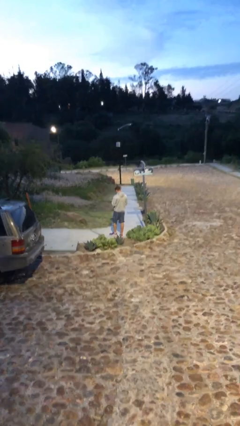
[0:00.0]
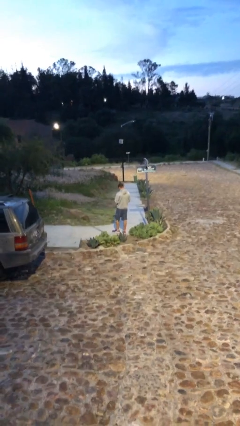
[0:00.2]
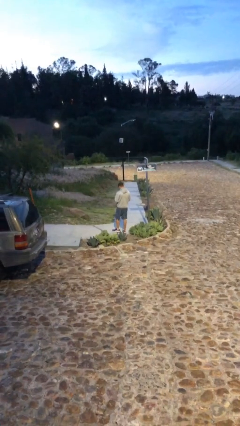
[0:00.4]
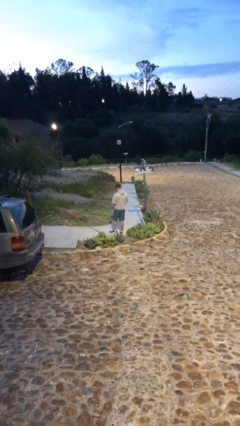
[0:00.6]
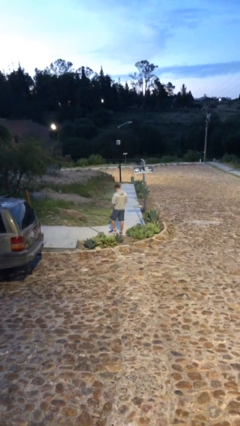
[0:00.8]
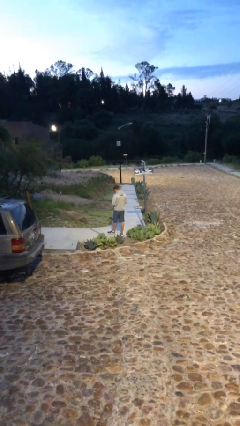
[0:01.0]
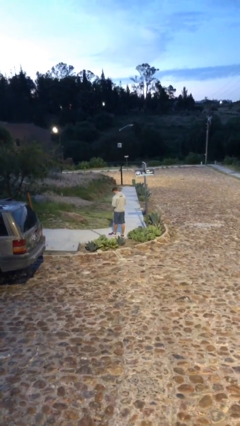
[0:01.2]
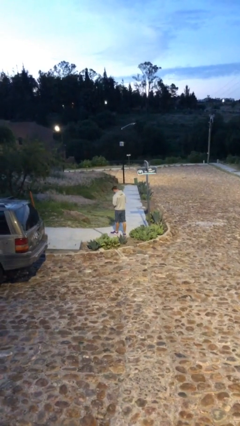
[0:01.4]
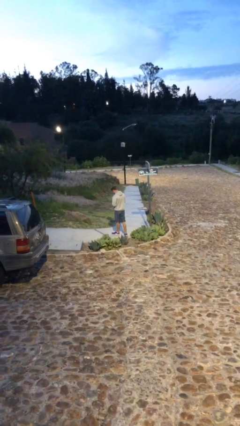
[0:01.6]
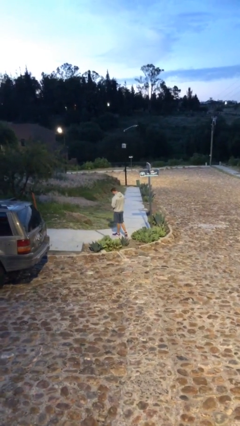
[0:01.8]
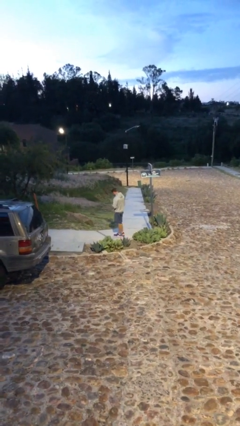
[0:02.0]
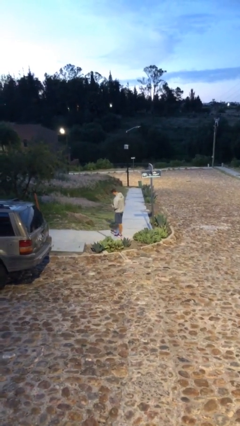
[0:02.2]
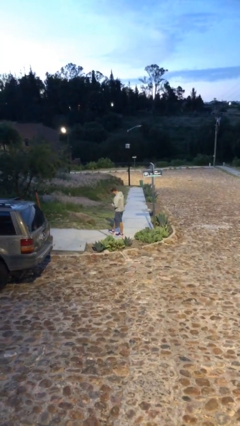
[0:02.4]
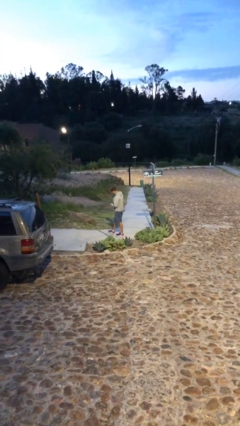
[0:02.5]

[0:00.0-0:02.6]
person texts on phone

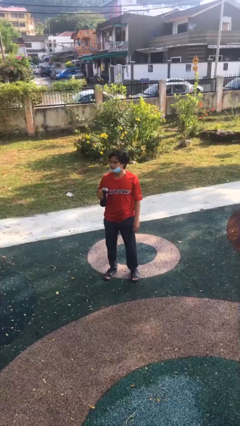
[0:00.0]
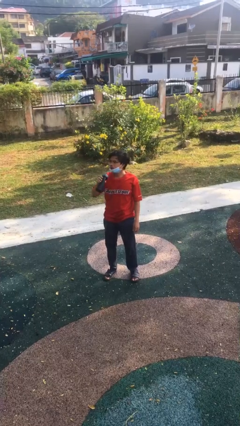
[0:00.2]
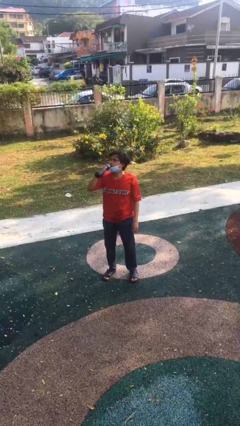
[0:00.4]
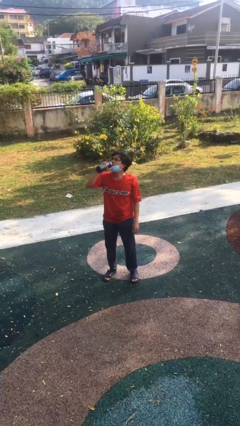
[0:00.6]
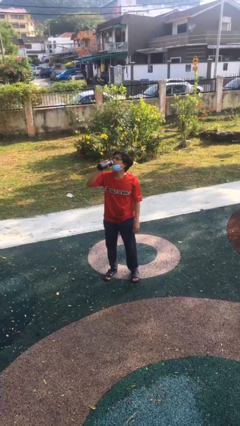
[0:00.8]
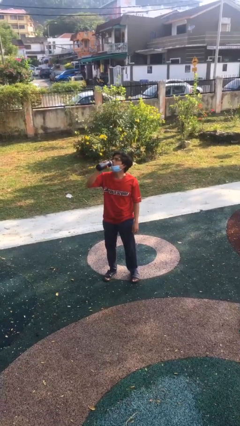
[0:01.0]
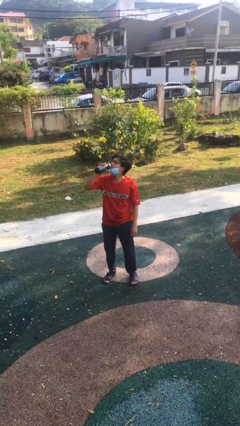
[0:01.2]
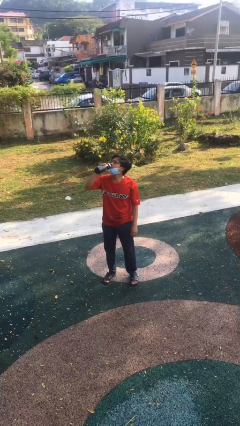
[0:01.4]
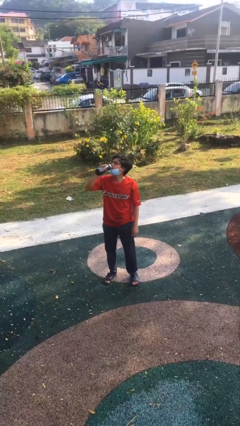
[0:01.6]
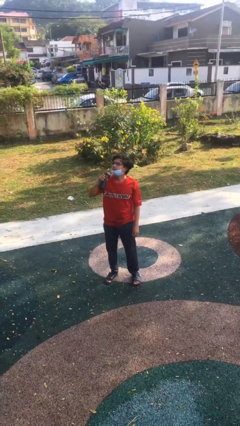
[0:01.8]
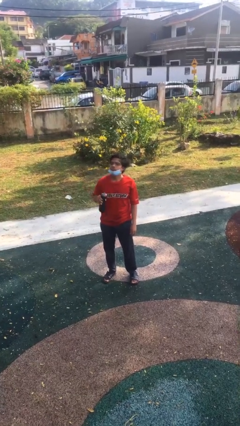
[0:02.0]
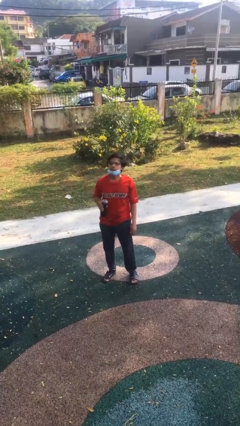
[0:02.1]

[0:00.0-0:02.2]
person drinks from bottle

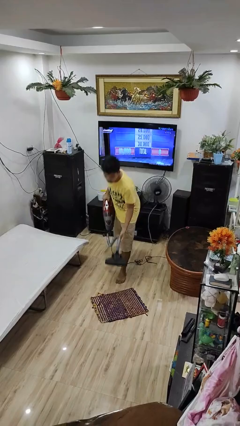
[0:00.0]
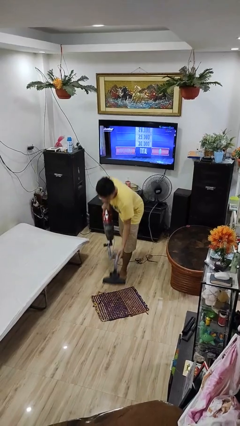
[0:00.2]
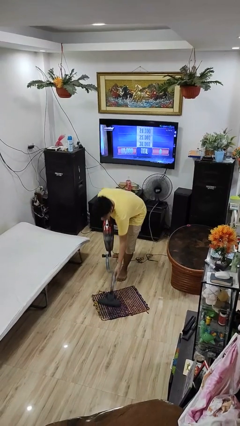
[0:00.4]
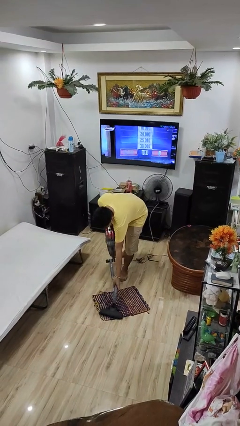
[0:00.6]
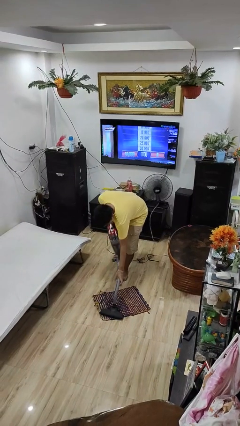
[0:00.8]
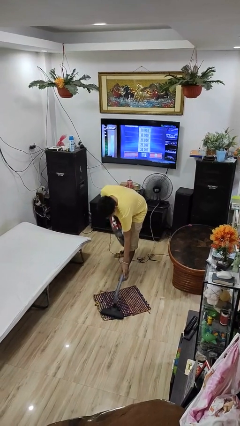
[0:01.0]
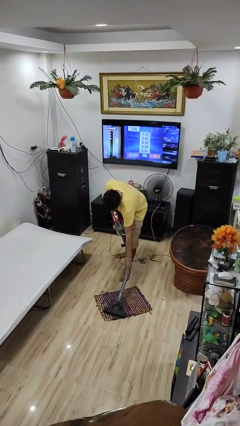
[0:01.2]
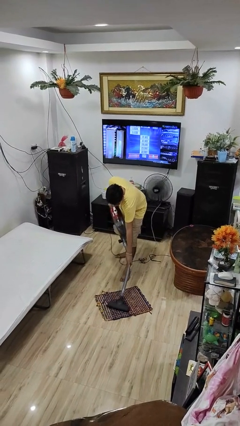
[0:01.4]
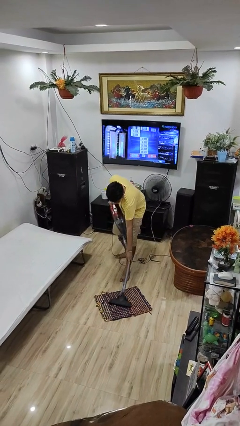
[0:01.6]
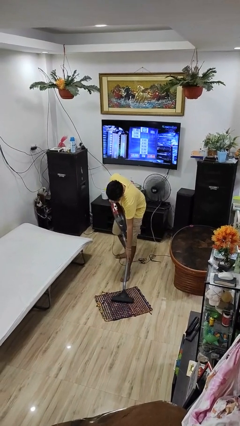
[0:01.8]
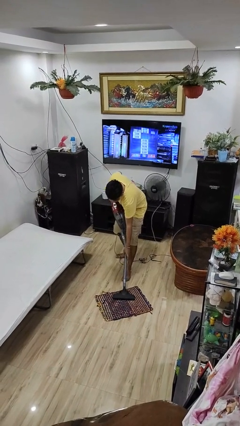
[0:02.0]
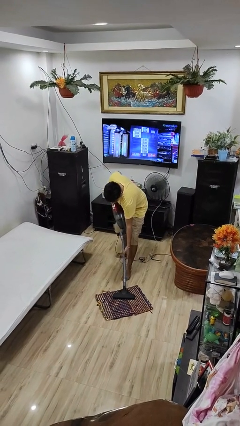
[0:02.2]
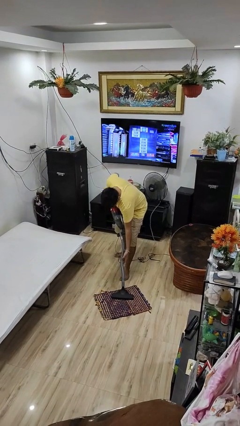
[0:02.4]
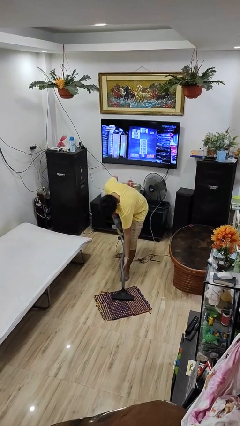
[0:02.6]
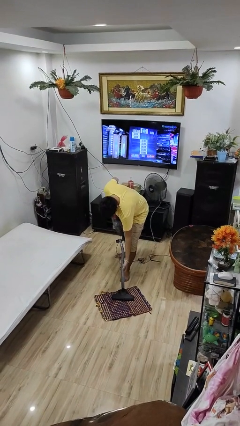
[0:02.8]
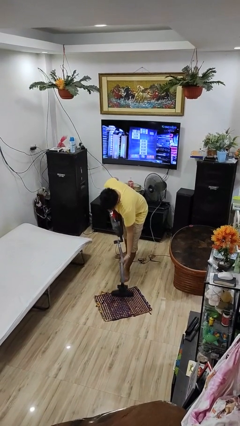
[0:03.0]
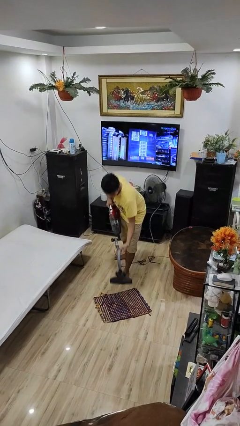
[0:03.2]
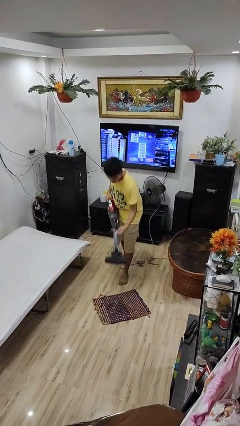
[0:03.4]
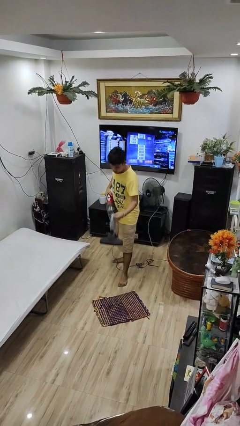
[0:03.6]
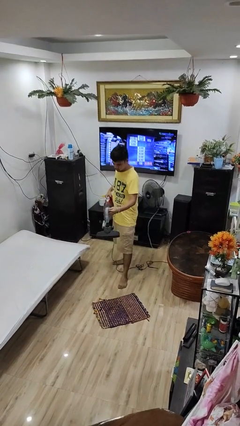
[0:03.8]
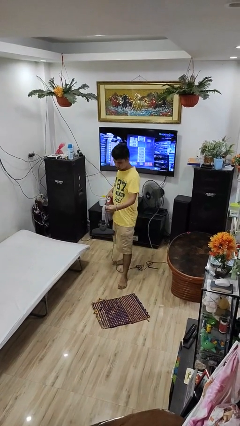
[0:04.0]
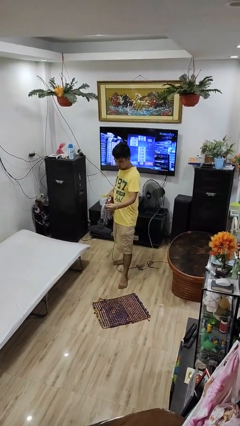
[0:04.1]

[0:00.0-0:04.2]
person vacuums carpet

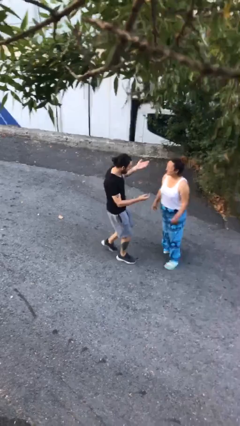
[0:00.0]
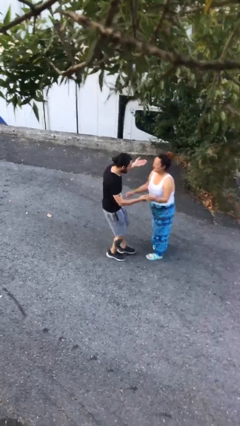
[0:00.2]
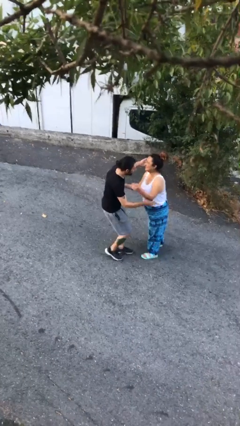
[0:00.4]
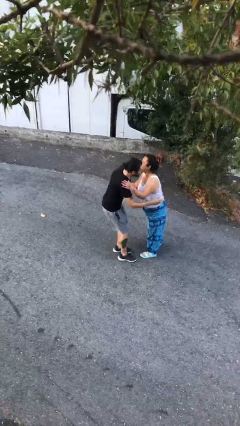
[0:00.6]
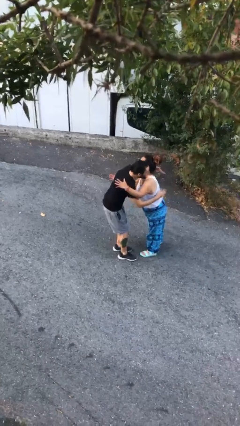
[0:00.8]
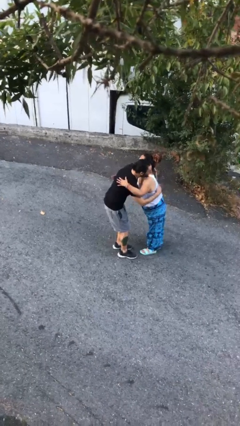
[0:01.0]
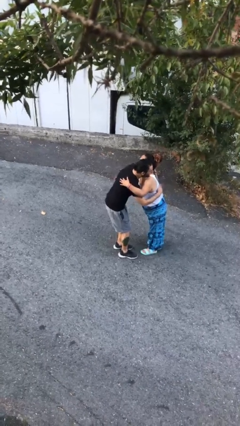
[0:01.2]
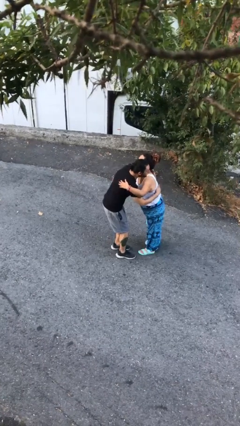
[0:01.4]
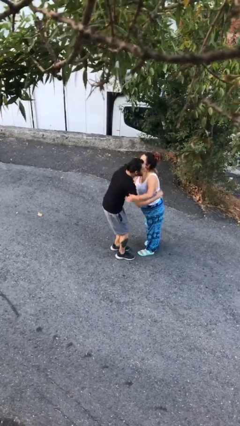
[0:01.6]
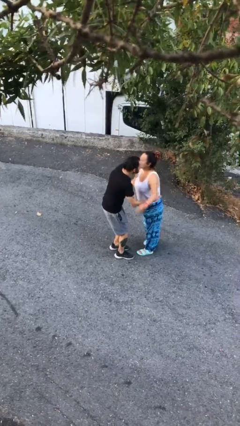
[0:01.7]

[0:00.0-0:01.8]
person embraces person

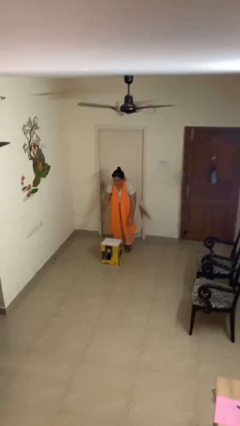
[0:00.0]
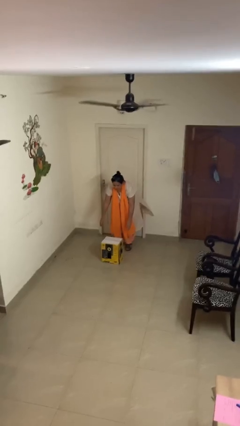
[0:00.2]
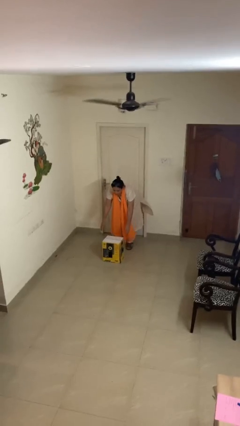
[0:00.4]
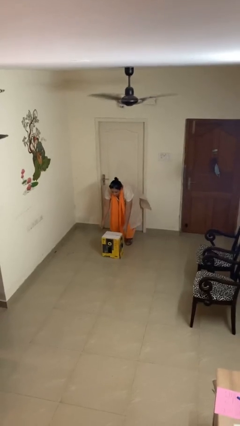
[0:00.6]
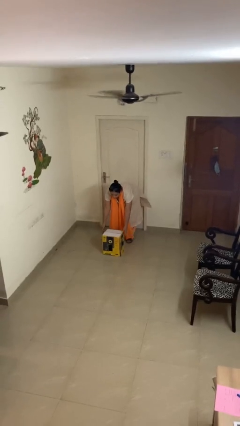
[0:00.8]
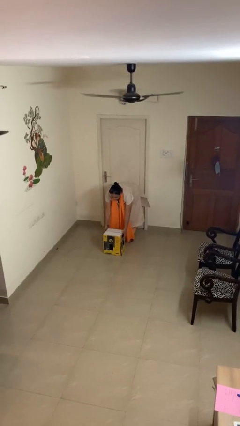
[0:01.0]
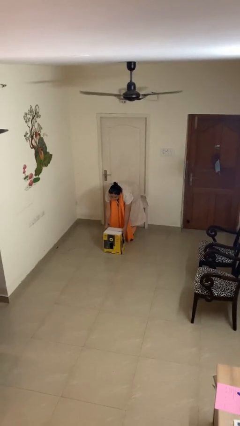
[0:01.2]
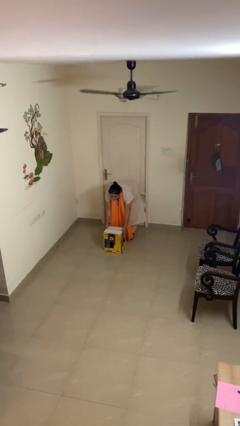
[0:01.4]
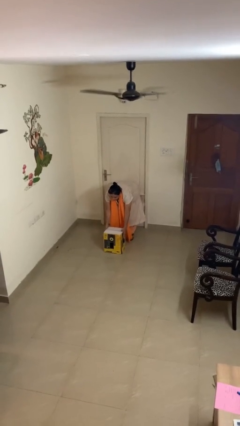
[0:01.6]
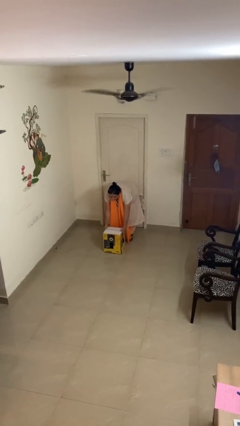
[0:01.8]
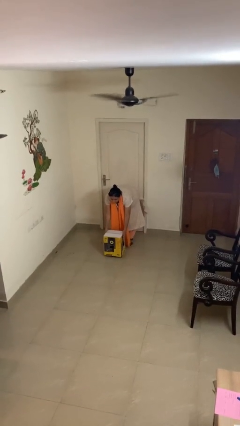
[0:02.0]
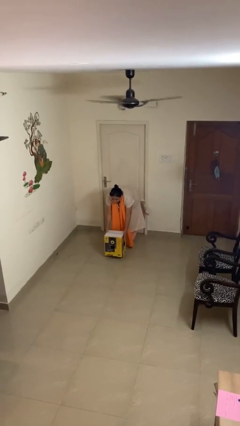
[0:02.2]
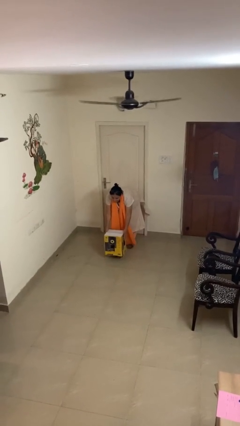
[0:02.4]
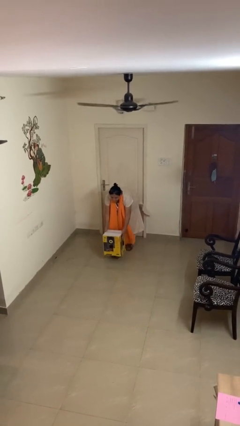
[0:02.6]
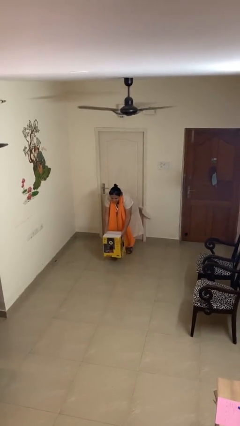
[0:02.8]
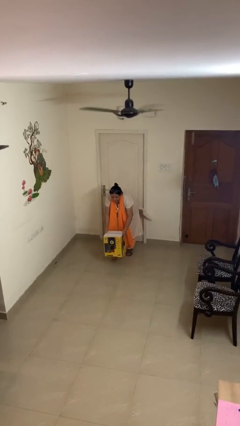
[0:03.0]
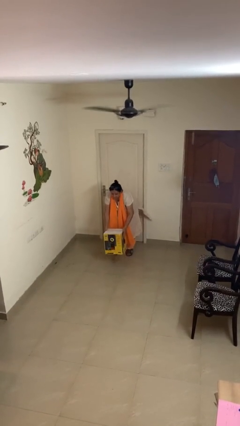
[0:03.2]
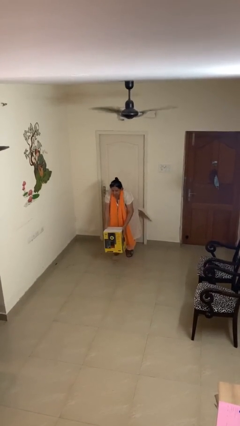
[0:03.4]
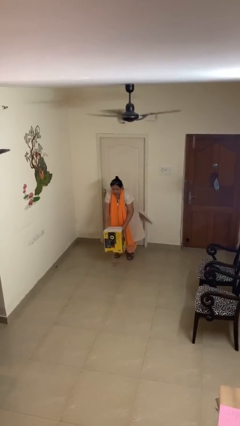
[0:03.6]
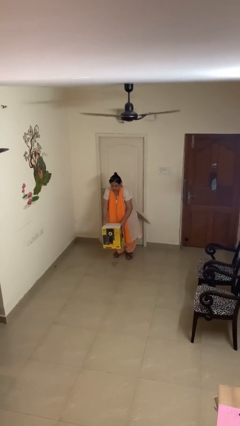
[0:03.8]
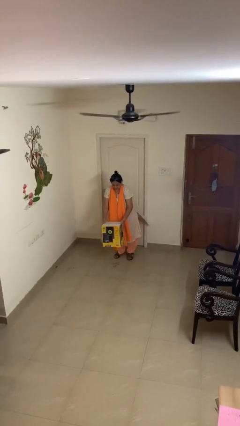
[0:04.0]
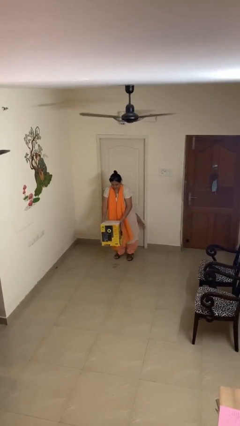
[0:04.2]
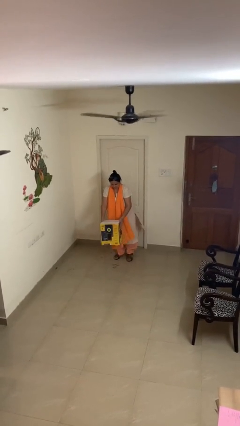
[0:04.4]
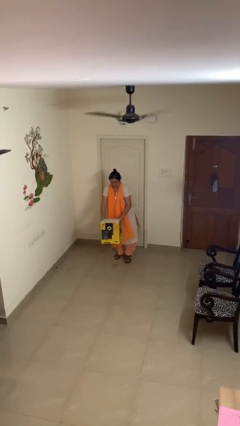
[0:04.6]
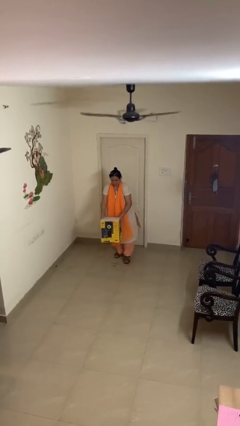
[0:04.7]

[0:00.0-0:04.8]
person picks up object from floor

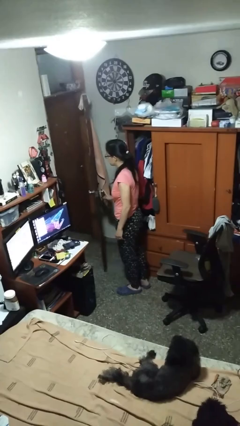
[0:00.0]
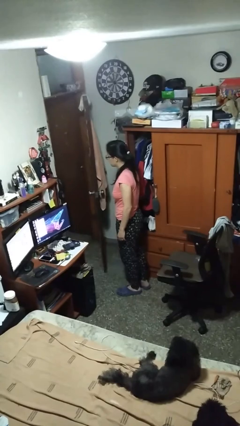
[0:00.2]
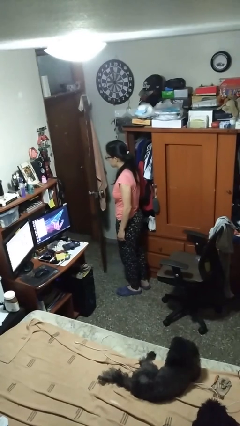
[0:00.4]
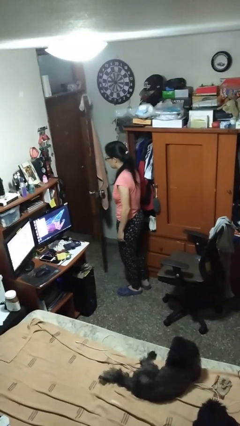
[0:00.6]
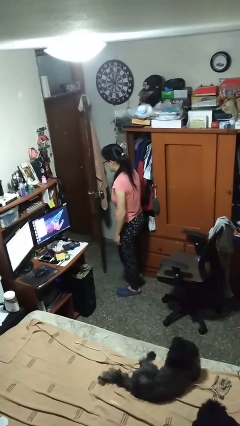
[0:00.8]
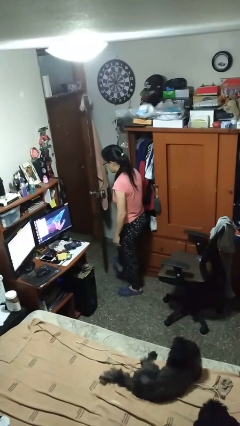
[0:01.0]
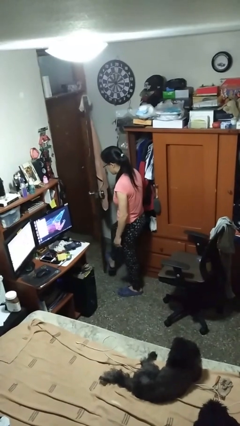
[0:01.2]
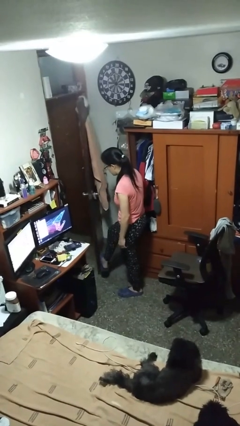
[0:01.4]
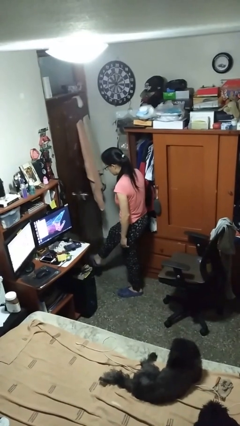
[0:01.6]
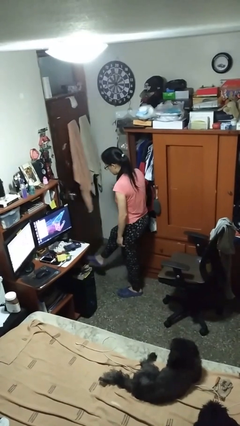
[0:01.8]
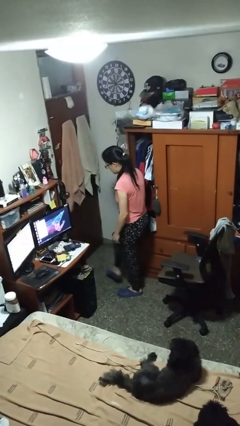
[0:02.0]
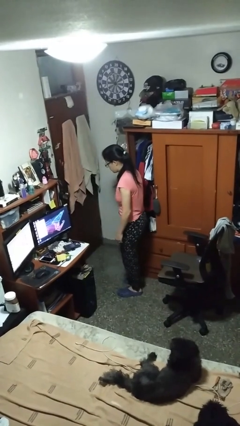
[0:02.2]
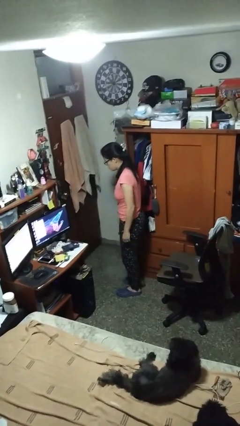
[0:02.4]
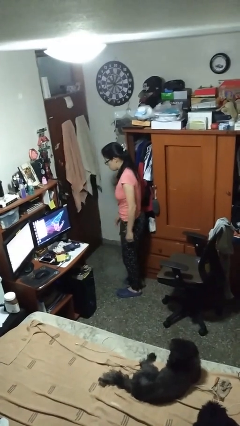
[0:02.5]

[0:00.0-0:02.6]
person closes door with foot
